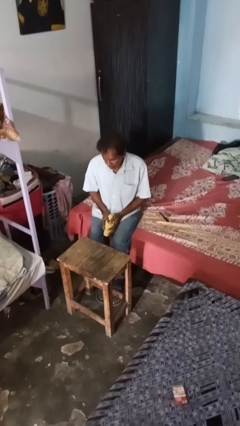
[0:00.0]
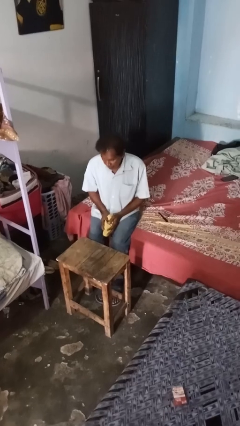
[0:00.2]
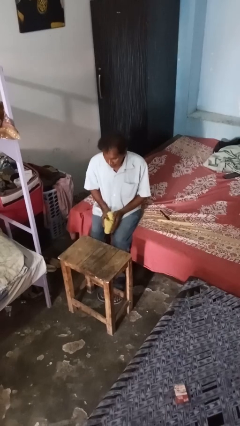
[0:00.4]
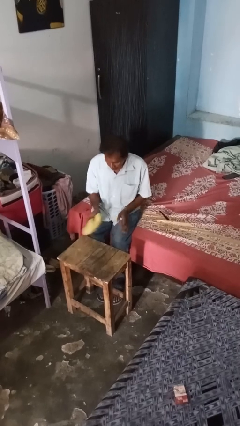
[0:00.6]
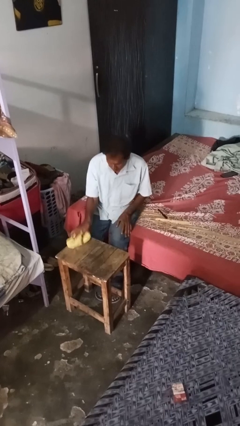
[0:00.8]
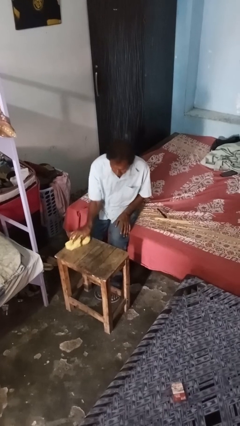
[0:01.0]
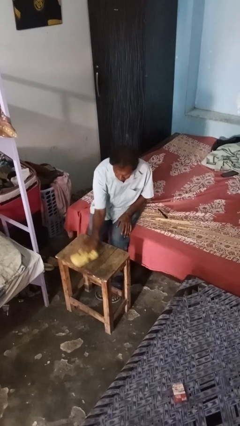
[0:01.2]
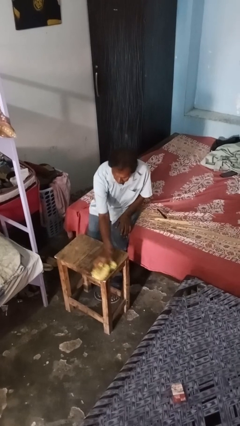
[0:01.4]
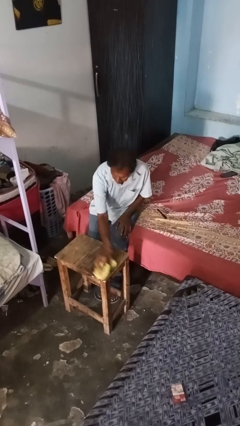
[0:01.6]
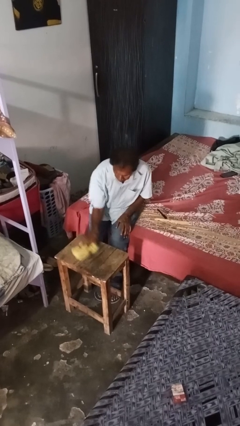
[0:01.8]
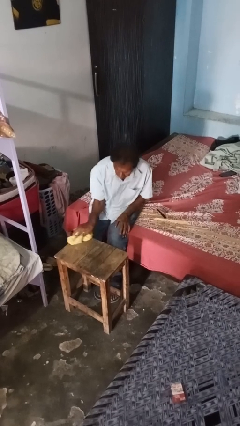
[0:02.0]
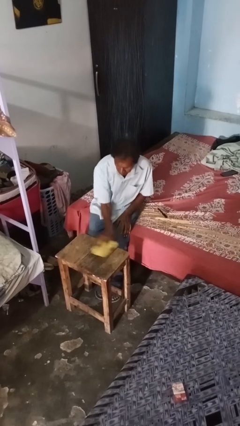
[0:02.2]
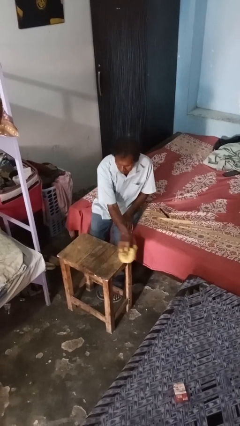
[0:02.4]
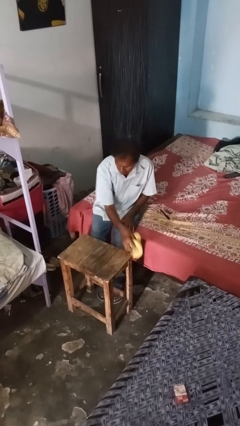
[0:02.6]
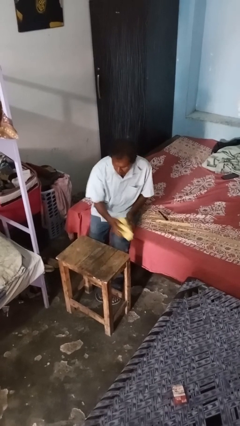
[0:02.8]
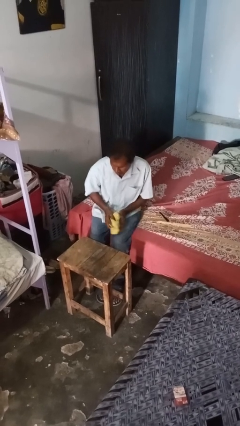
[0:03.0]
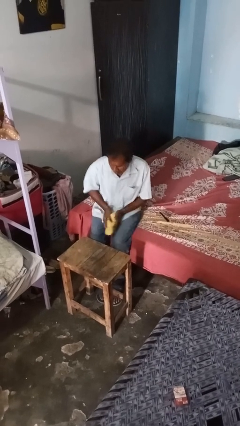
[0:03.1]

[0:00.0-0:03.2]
person cleans table with rag

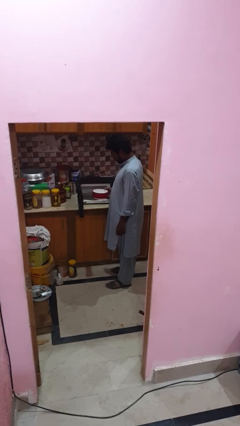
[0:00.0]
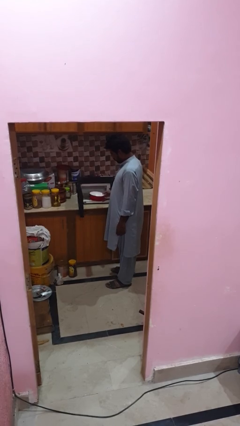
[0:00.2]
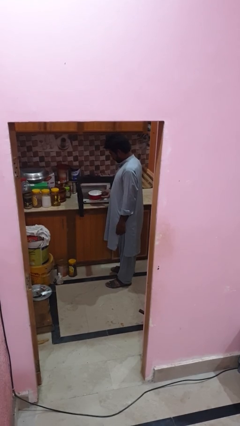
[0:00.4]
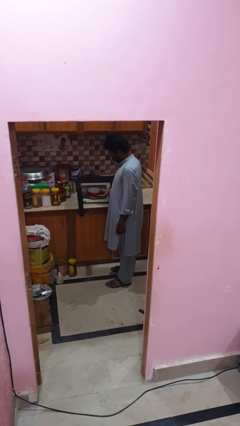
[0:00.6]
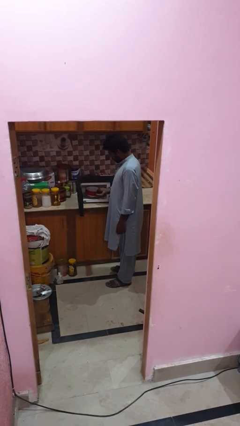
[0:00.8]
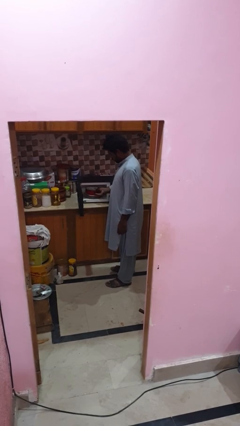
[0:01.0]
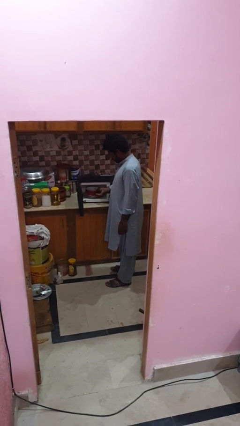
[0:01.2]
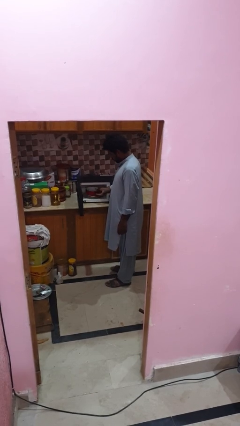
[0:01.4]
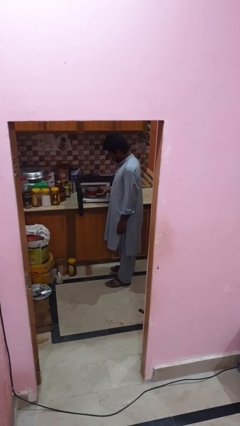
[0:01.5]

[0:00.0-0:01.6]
person puts object into microwave

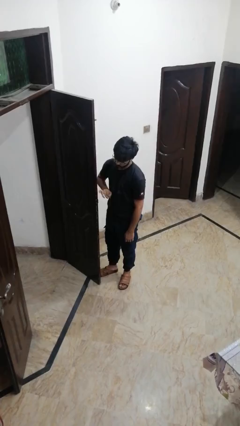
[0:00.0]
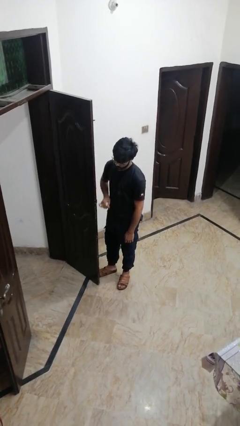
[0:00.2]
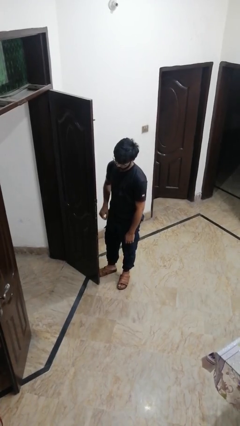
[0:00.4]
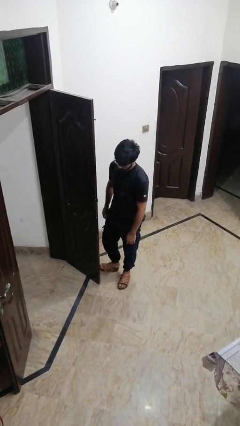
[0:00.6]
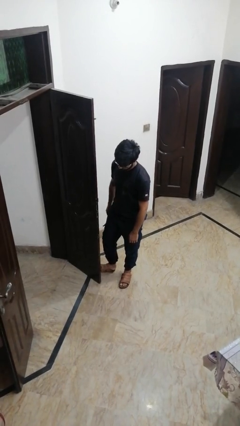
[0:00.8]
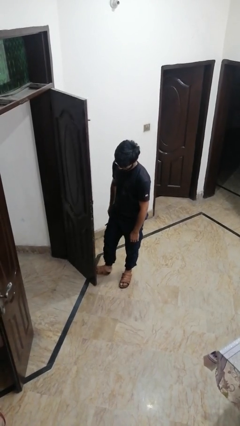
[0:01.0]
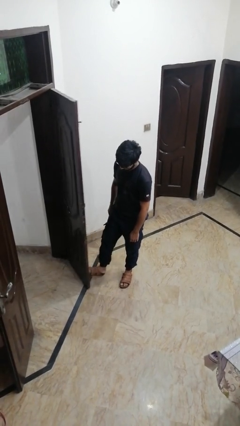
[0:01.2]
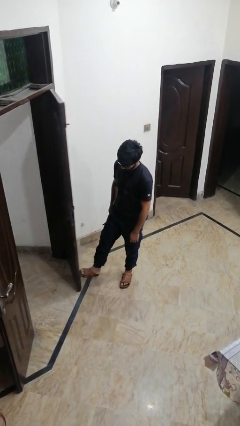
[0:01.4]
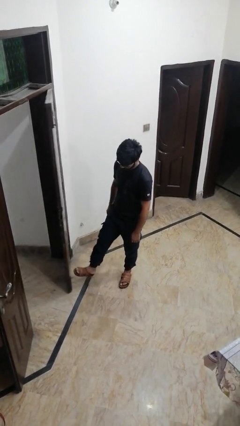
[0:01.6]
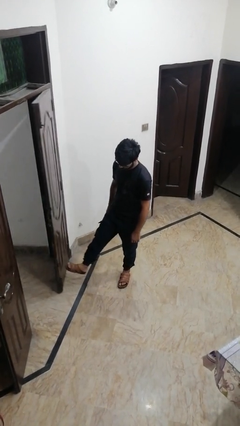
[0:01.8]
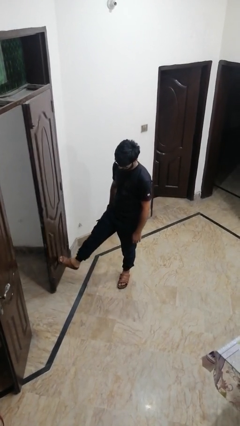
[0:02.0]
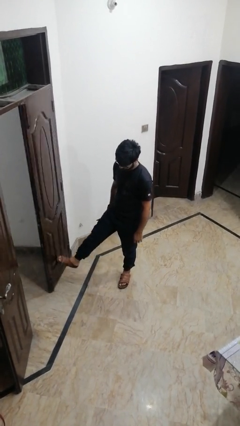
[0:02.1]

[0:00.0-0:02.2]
person closes door with foot

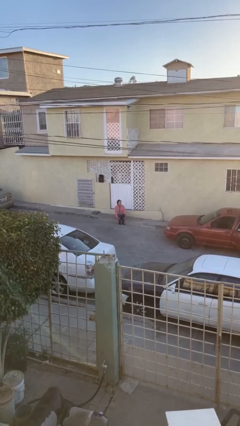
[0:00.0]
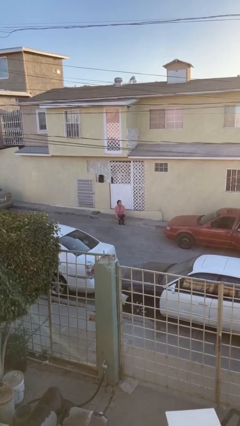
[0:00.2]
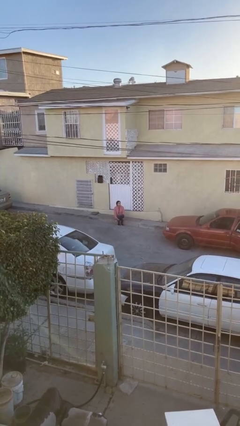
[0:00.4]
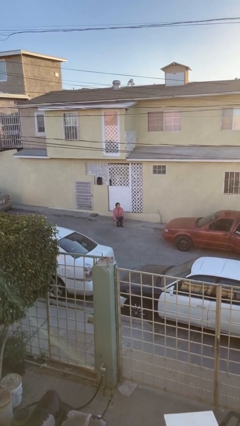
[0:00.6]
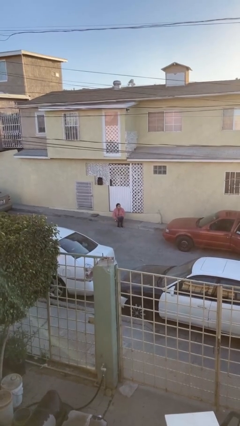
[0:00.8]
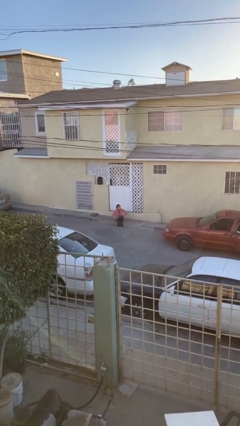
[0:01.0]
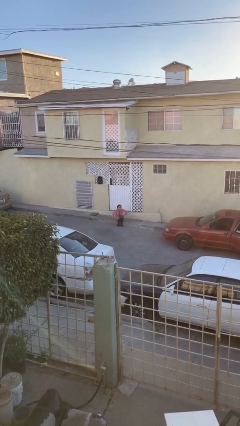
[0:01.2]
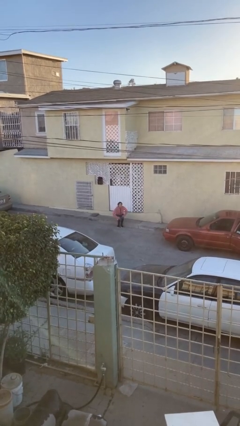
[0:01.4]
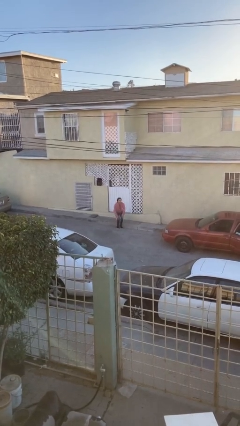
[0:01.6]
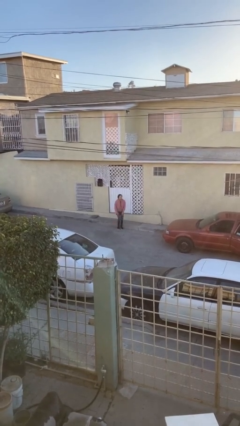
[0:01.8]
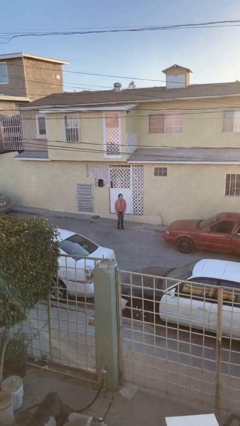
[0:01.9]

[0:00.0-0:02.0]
person stands up

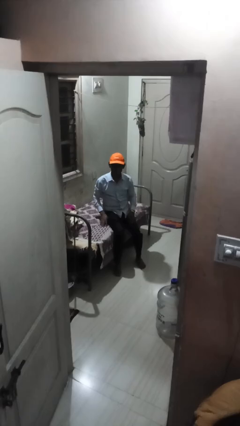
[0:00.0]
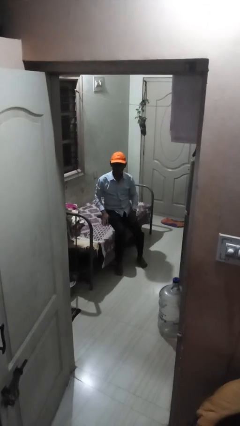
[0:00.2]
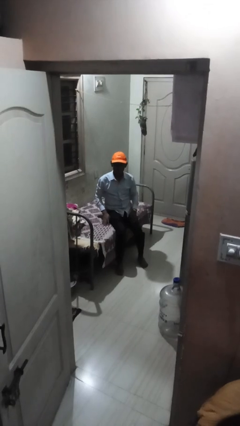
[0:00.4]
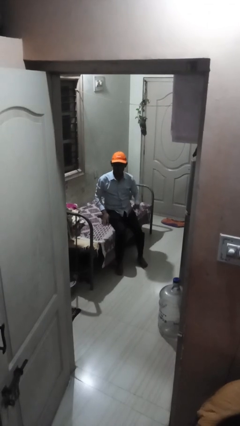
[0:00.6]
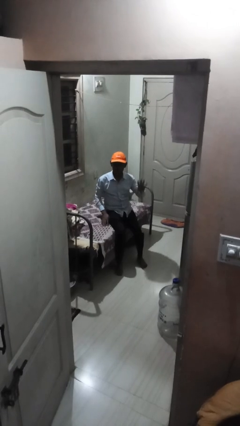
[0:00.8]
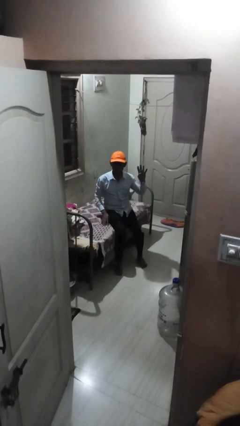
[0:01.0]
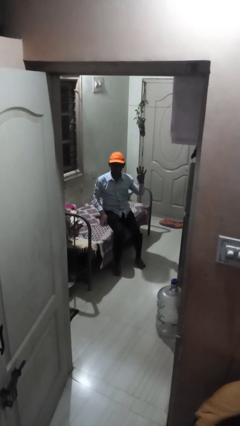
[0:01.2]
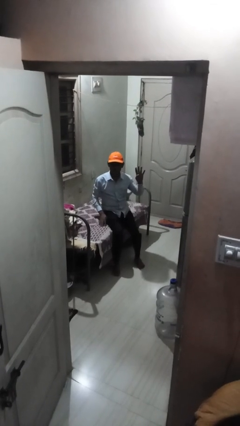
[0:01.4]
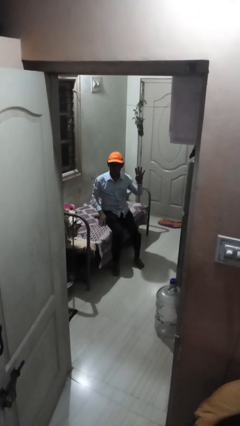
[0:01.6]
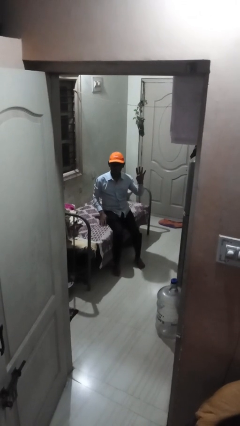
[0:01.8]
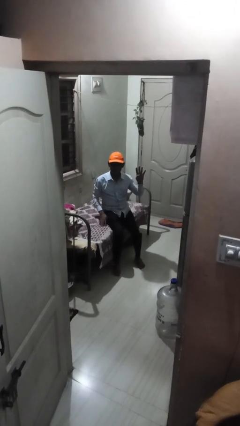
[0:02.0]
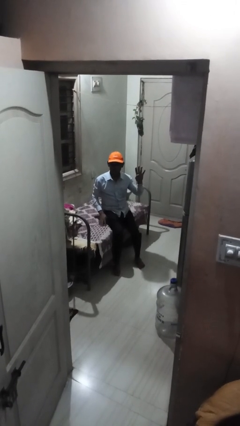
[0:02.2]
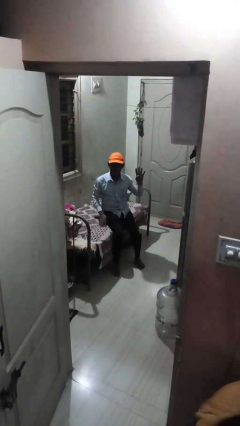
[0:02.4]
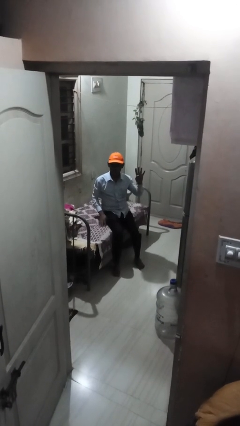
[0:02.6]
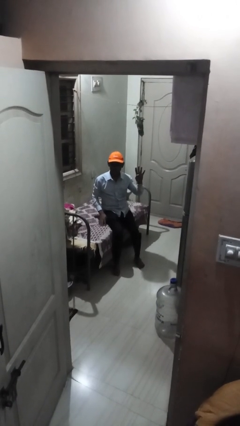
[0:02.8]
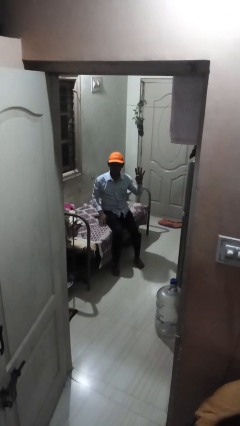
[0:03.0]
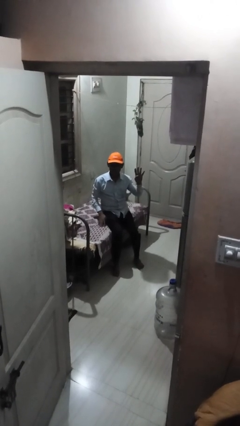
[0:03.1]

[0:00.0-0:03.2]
person gestures number four

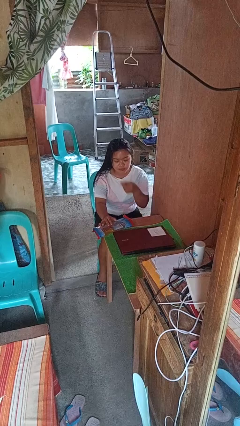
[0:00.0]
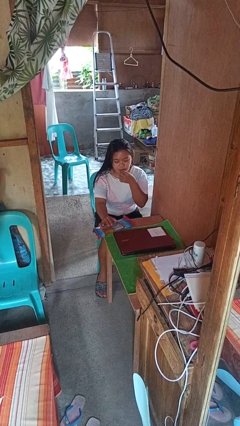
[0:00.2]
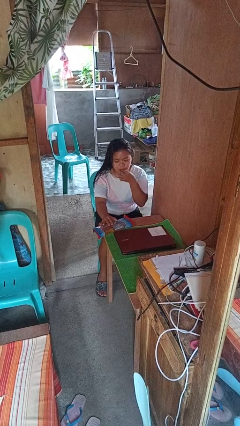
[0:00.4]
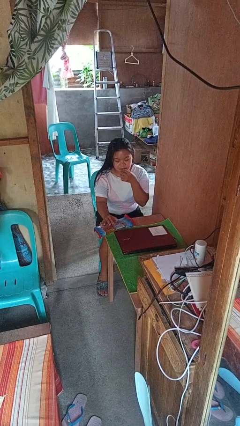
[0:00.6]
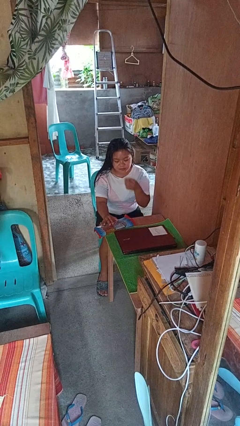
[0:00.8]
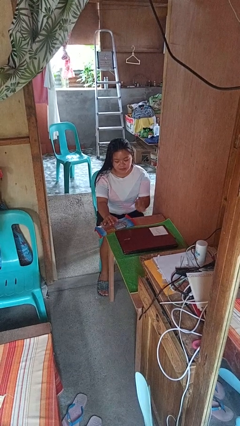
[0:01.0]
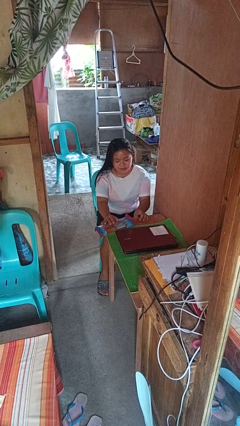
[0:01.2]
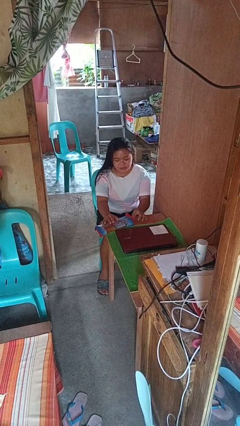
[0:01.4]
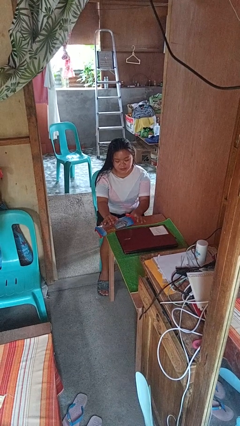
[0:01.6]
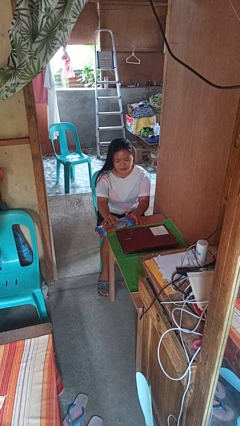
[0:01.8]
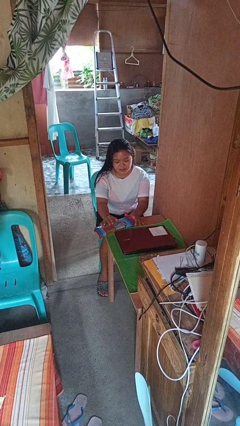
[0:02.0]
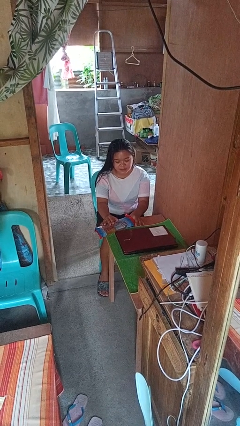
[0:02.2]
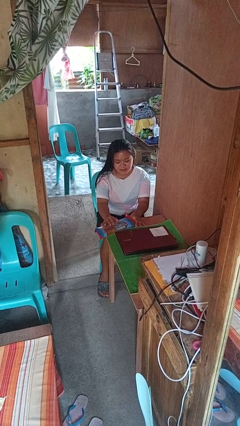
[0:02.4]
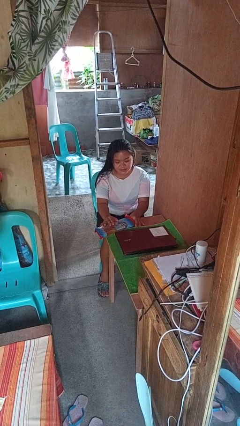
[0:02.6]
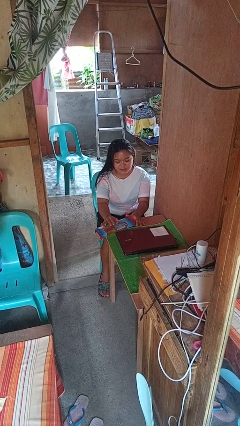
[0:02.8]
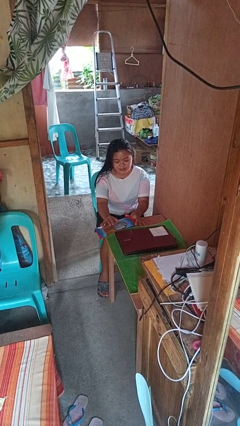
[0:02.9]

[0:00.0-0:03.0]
person eats snack from bag

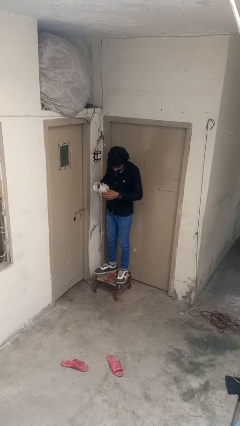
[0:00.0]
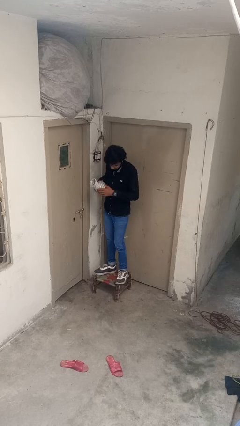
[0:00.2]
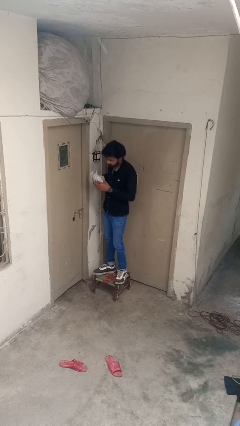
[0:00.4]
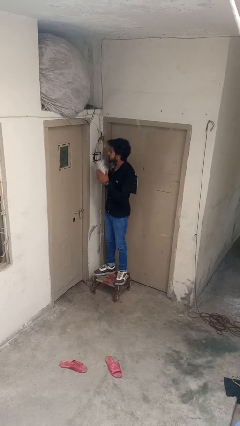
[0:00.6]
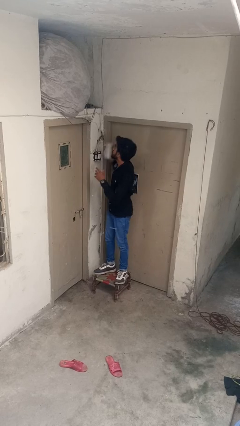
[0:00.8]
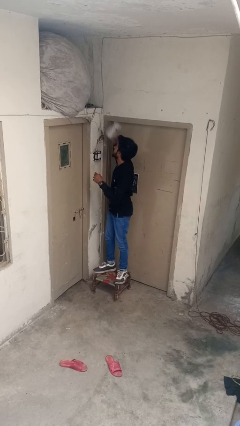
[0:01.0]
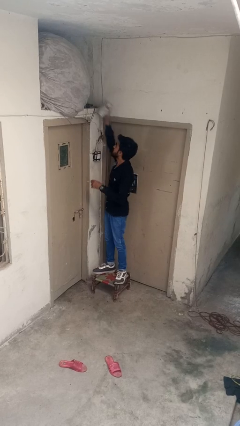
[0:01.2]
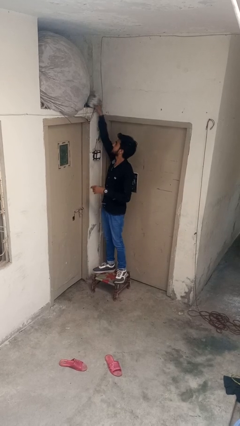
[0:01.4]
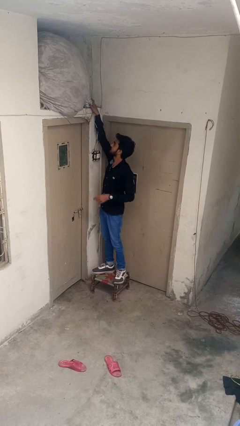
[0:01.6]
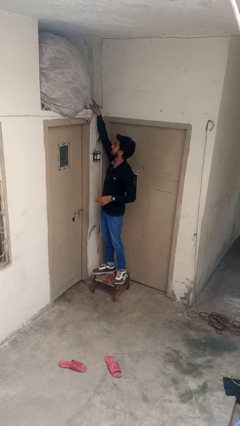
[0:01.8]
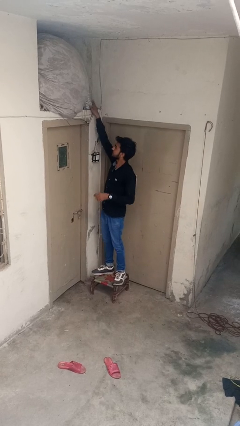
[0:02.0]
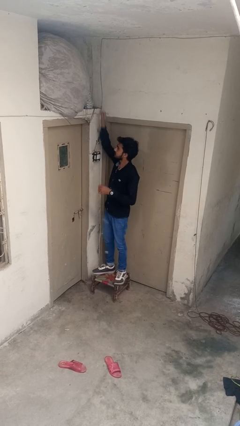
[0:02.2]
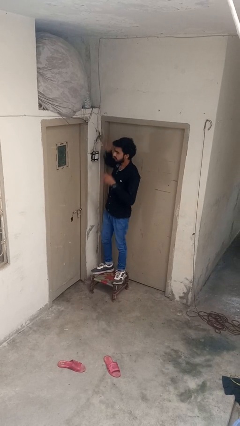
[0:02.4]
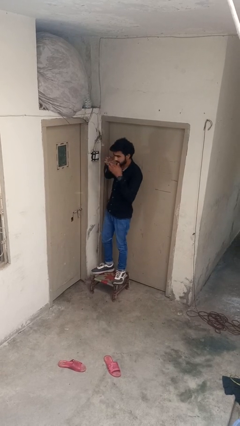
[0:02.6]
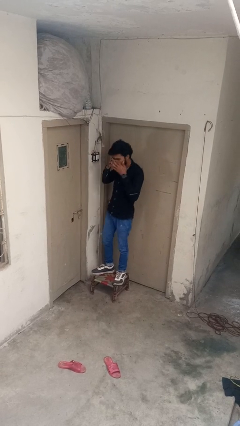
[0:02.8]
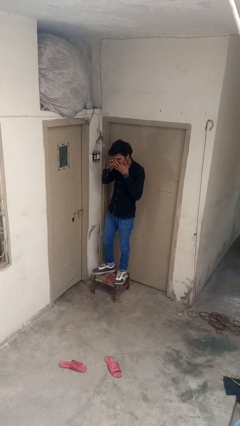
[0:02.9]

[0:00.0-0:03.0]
person puts down object on shelf
